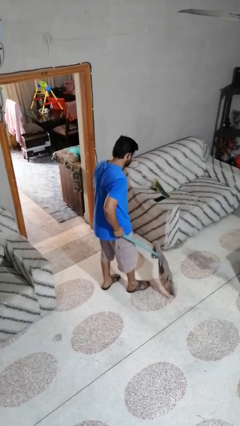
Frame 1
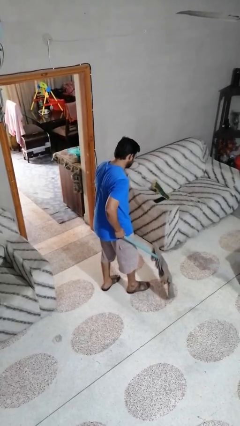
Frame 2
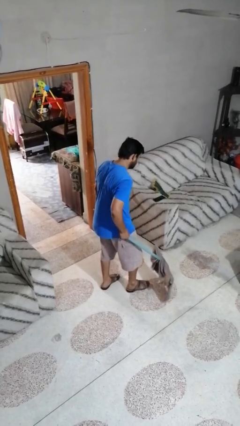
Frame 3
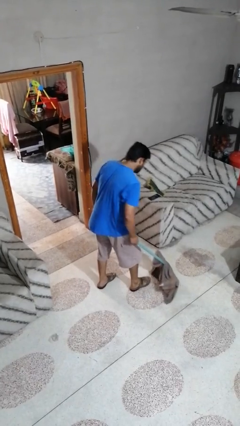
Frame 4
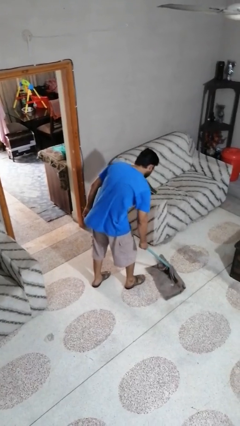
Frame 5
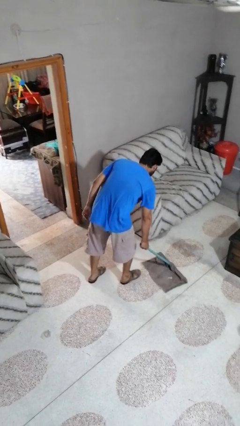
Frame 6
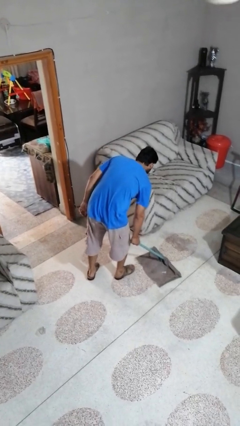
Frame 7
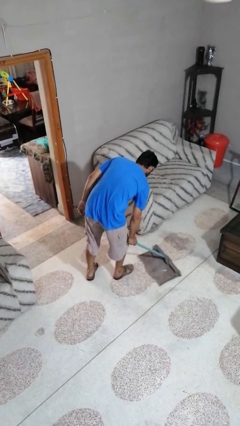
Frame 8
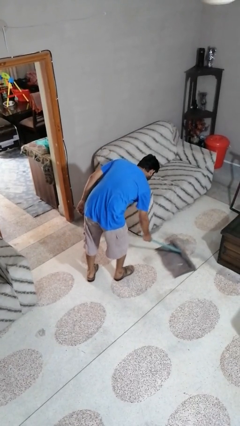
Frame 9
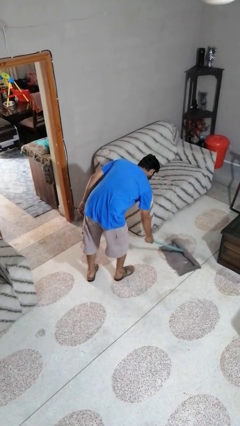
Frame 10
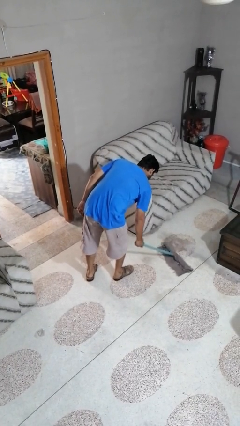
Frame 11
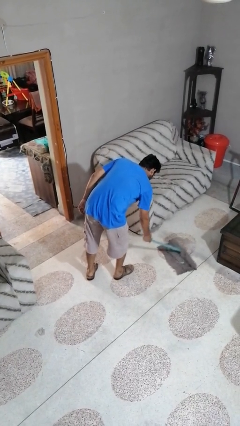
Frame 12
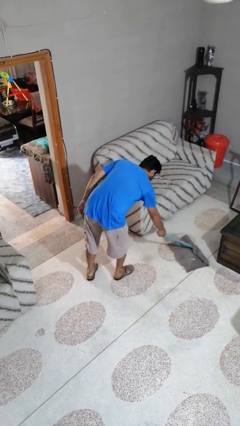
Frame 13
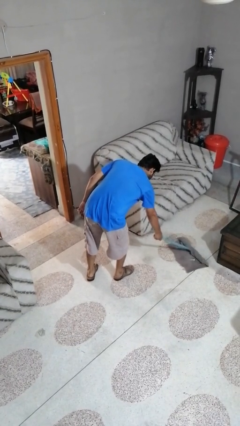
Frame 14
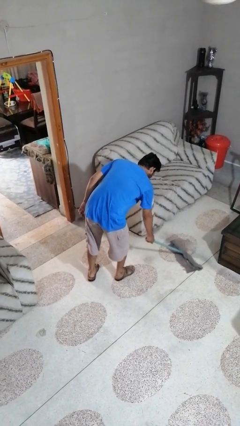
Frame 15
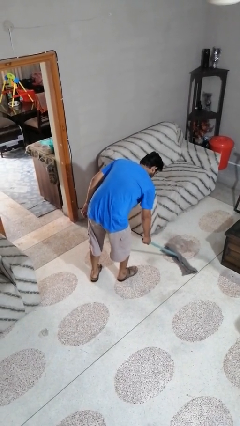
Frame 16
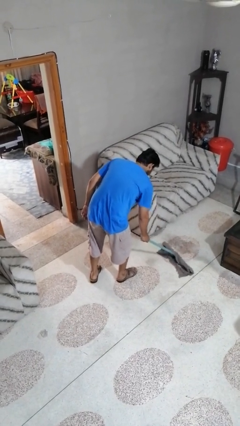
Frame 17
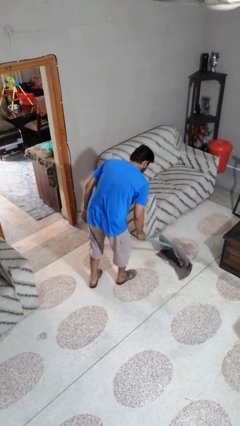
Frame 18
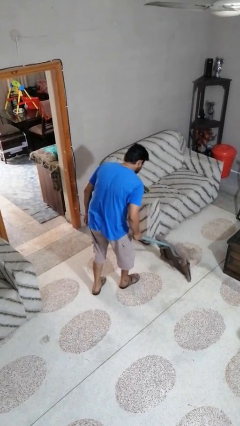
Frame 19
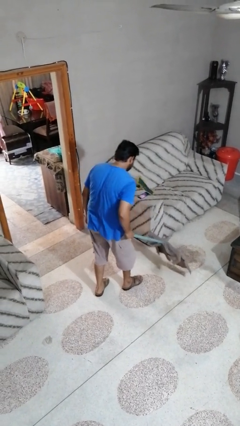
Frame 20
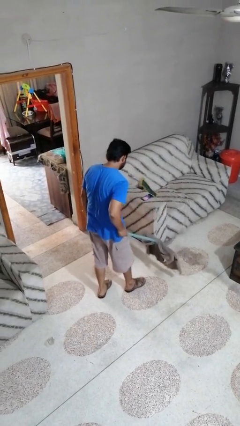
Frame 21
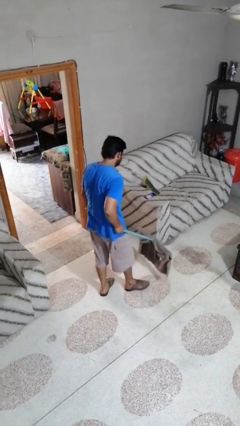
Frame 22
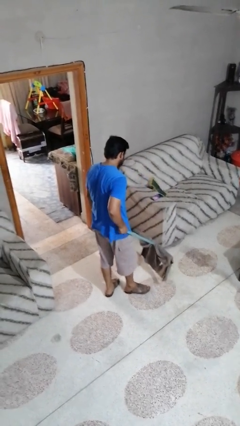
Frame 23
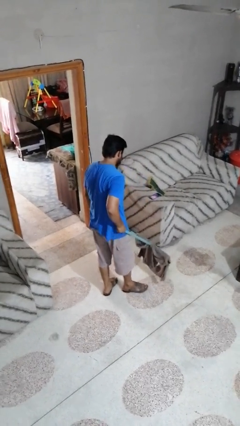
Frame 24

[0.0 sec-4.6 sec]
person mops

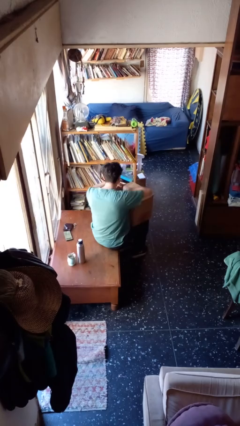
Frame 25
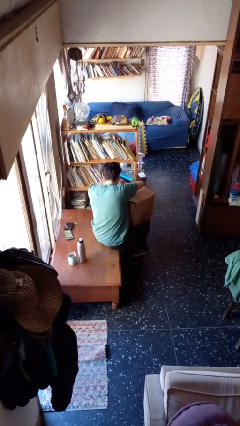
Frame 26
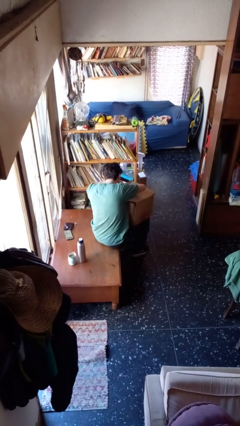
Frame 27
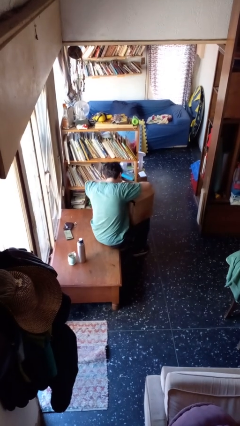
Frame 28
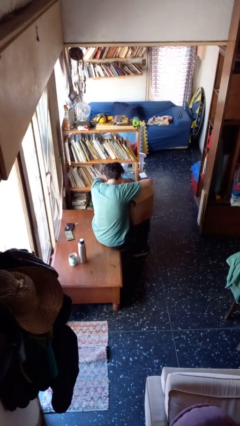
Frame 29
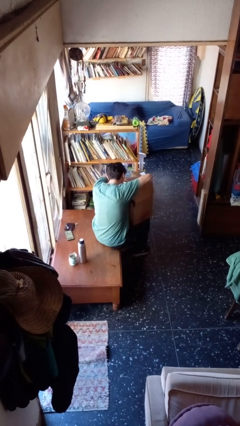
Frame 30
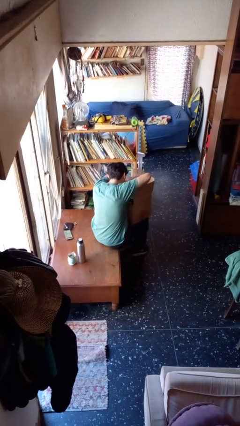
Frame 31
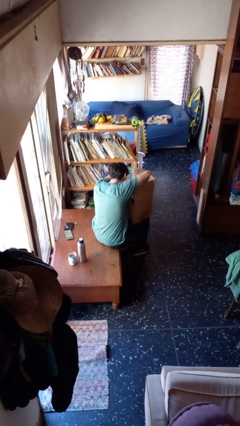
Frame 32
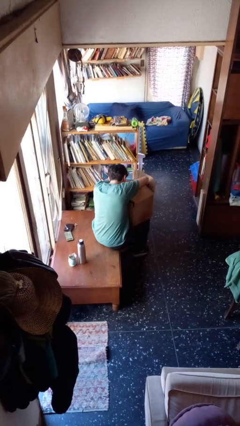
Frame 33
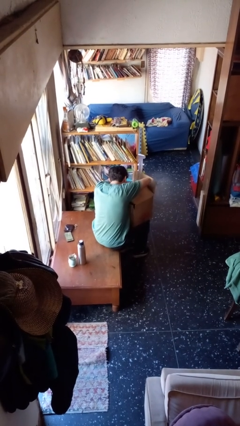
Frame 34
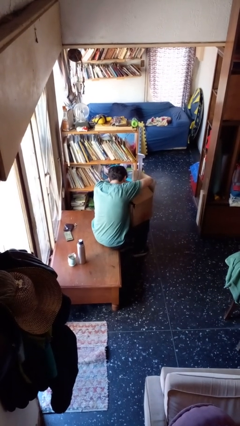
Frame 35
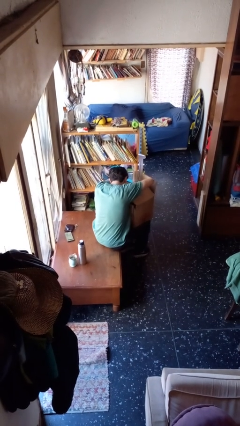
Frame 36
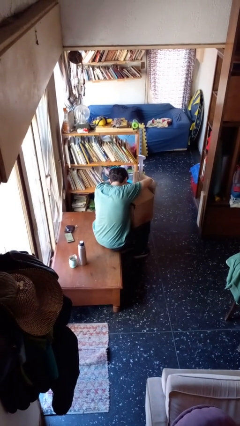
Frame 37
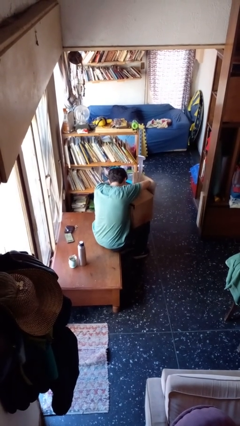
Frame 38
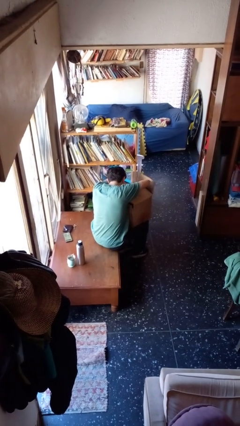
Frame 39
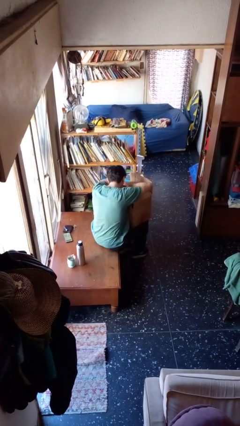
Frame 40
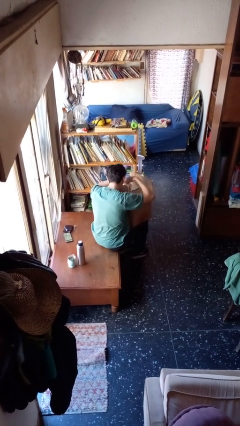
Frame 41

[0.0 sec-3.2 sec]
person searches in box

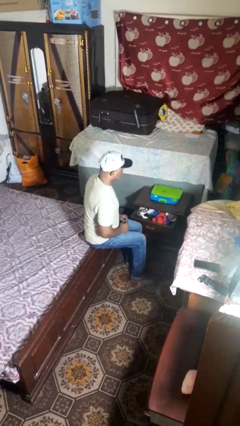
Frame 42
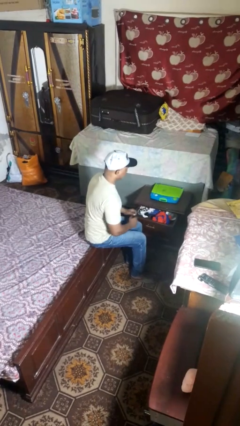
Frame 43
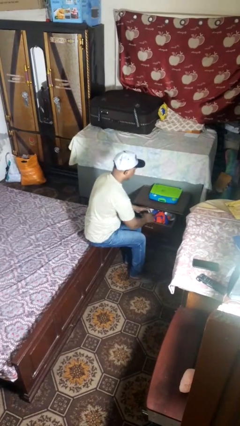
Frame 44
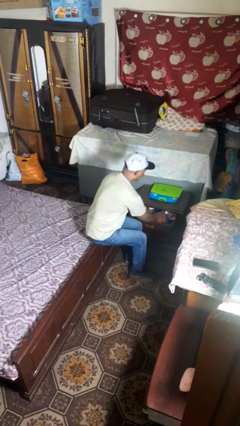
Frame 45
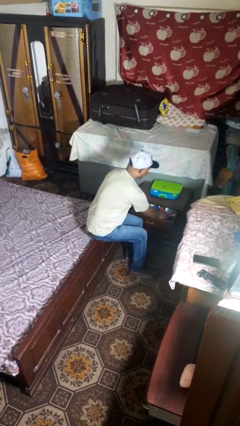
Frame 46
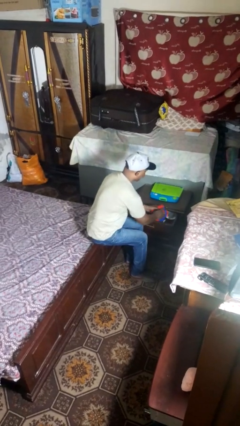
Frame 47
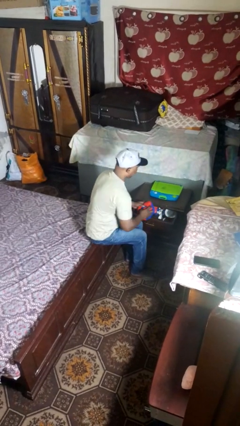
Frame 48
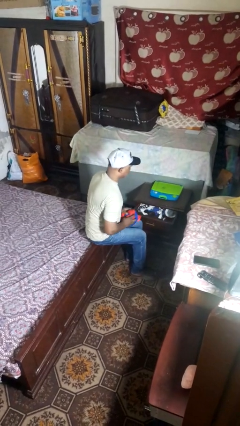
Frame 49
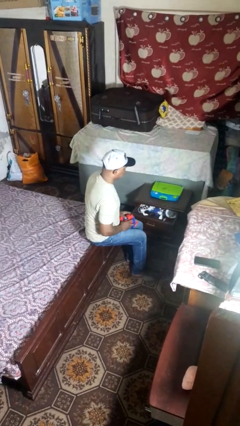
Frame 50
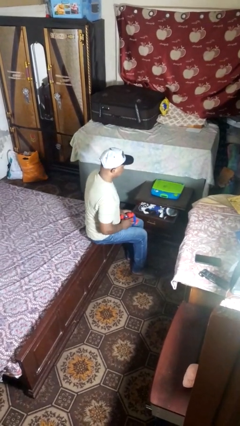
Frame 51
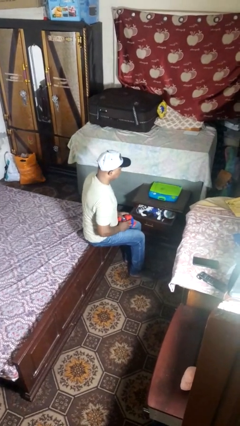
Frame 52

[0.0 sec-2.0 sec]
person takes clothes from dresser

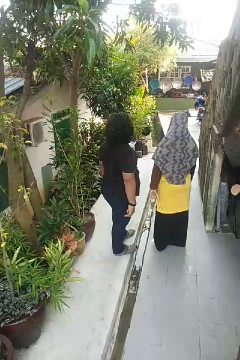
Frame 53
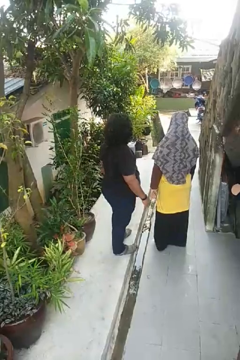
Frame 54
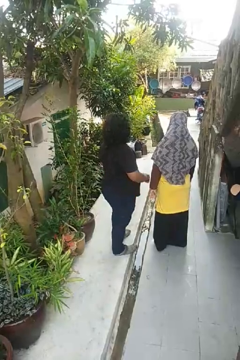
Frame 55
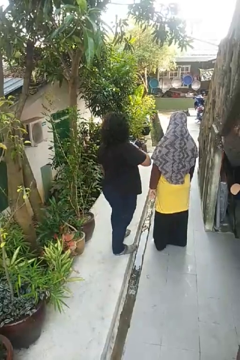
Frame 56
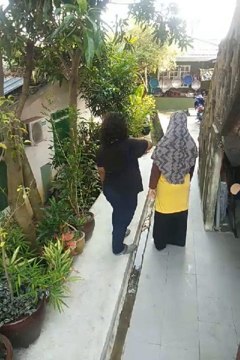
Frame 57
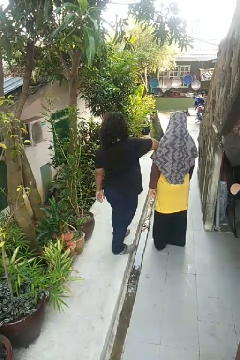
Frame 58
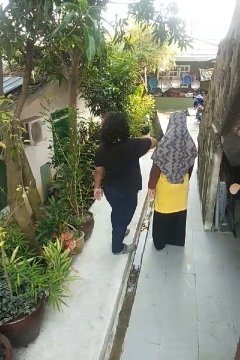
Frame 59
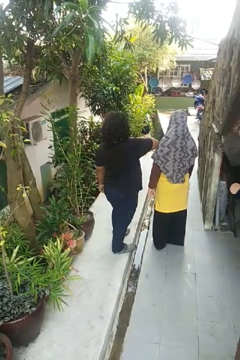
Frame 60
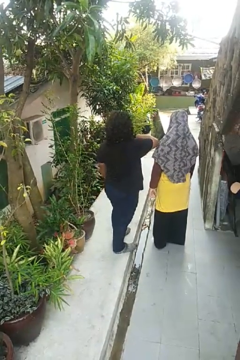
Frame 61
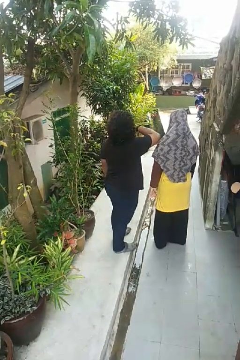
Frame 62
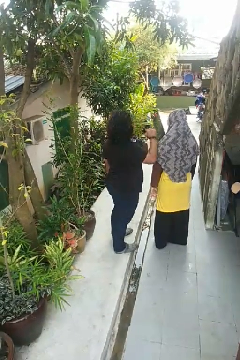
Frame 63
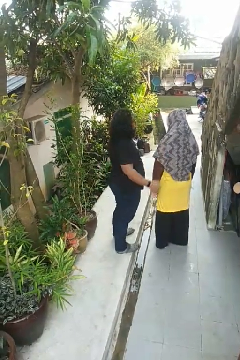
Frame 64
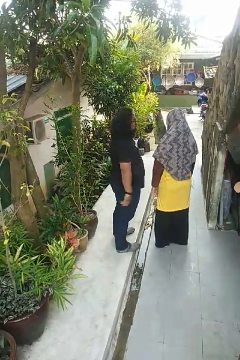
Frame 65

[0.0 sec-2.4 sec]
person nudges person with elbow

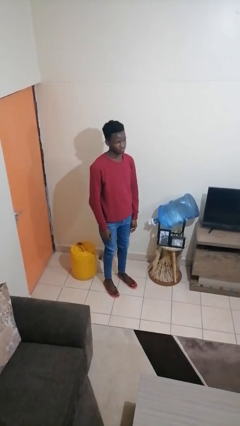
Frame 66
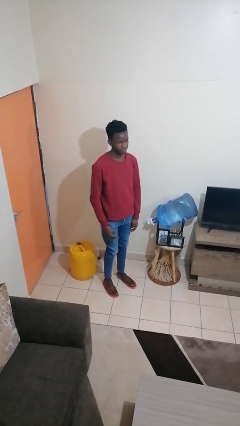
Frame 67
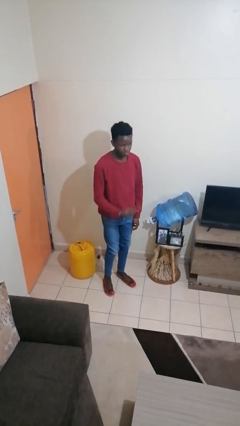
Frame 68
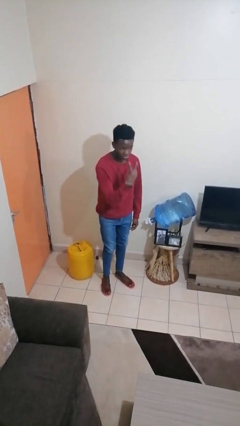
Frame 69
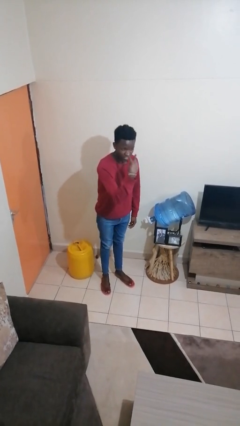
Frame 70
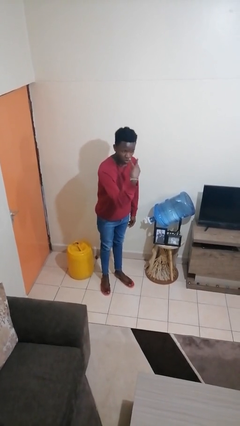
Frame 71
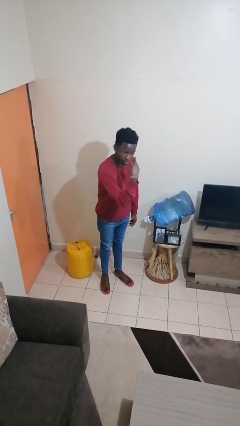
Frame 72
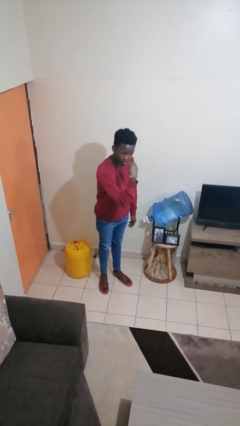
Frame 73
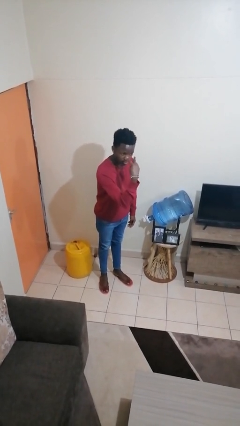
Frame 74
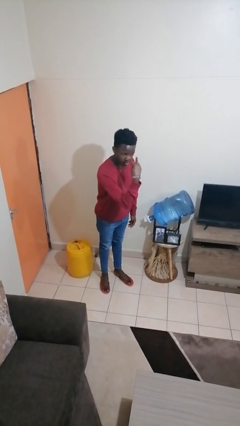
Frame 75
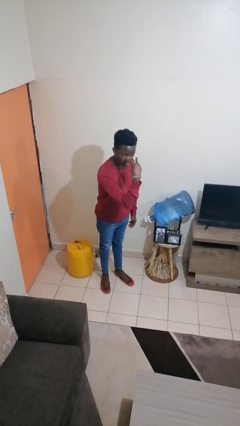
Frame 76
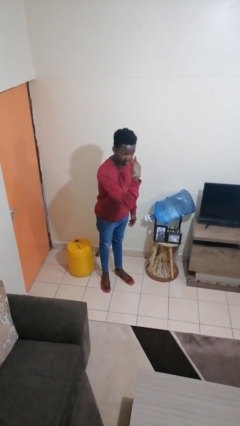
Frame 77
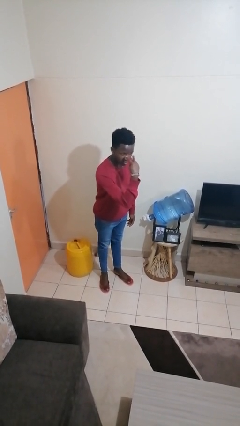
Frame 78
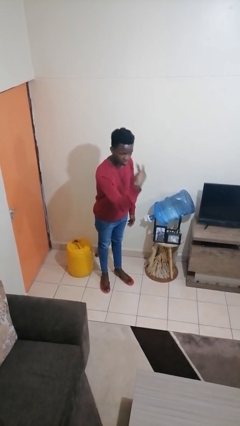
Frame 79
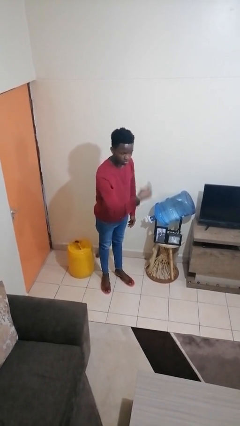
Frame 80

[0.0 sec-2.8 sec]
person gestures watch closely

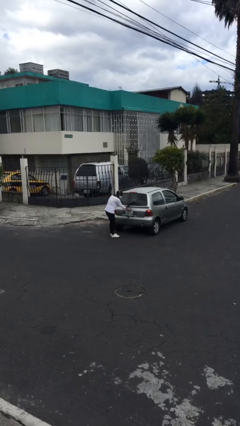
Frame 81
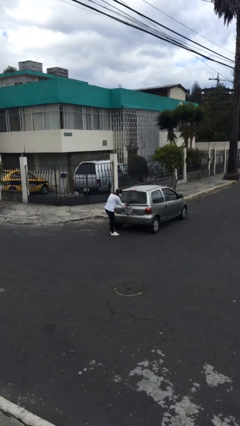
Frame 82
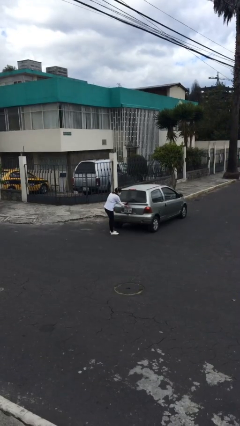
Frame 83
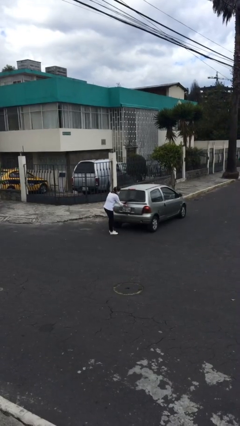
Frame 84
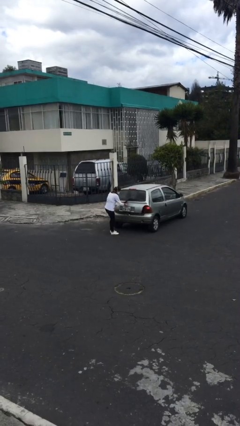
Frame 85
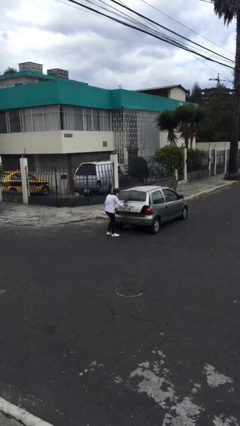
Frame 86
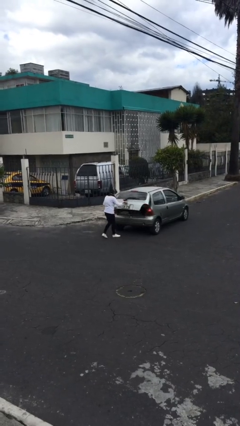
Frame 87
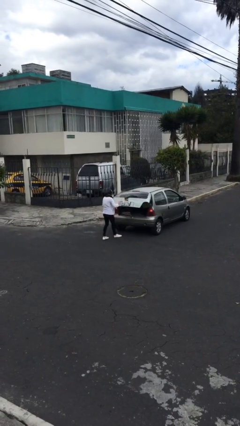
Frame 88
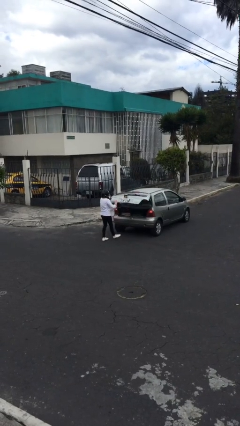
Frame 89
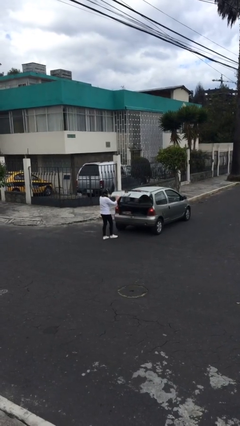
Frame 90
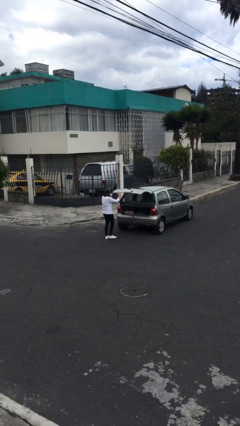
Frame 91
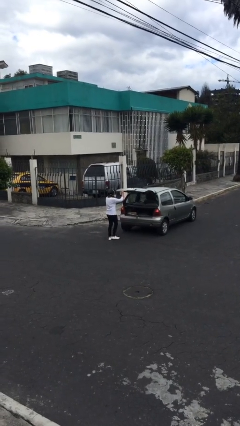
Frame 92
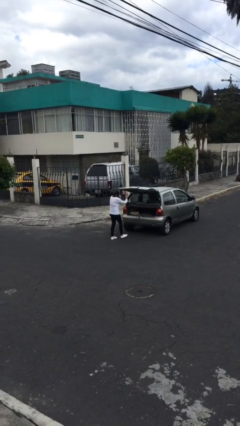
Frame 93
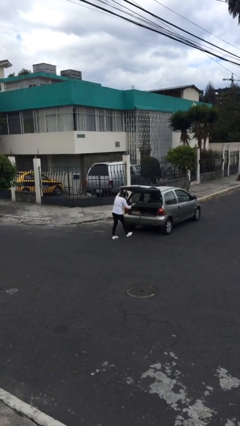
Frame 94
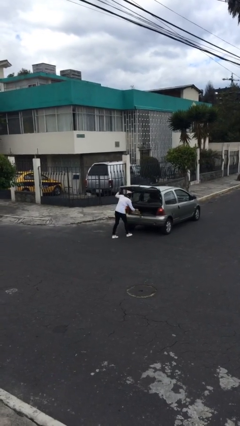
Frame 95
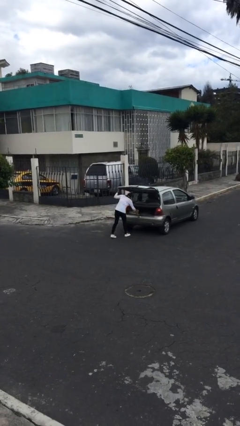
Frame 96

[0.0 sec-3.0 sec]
person opens car door
